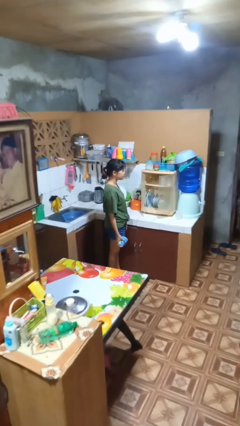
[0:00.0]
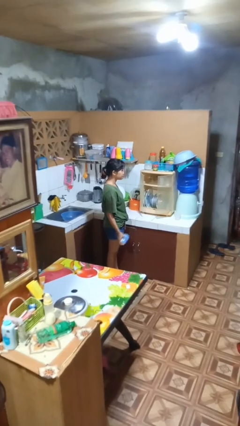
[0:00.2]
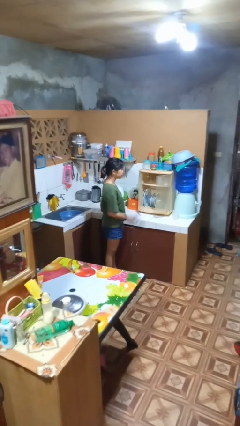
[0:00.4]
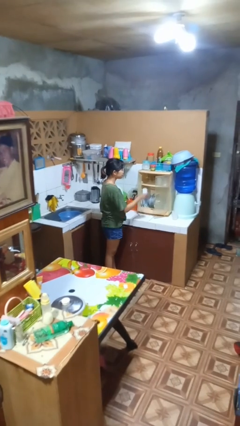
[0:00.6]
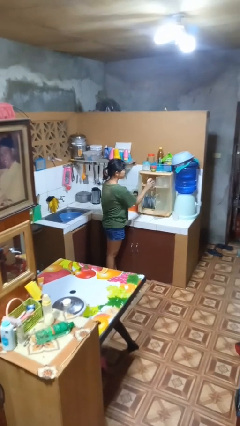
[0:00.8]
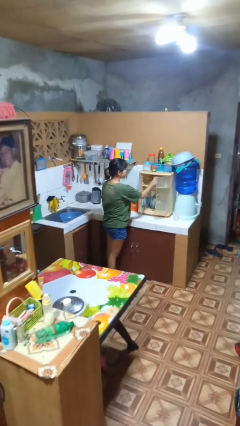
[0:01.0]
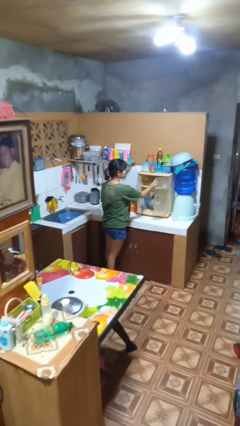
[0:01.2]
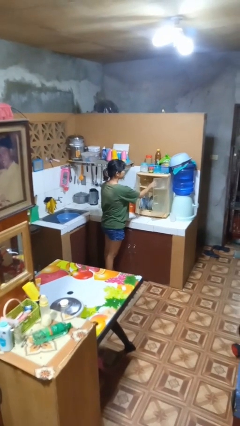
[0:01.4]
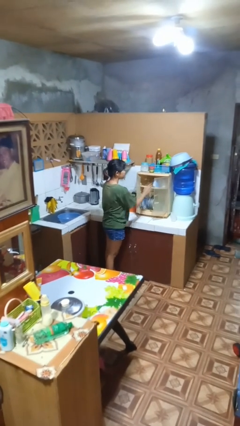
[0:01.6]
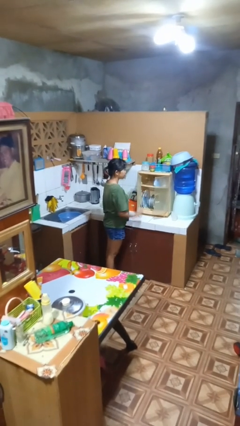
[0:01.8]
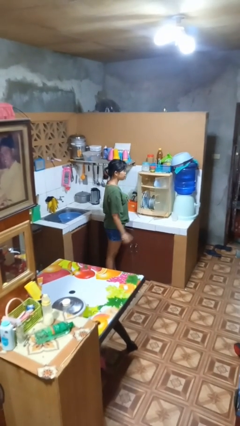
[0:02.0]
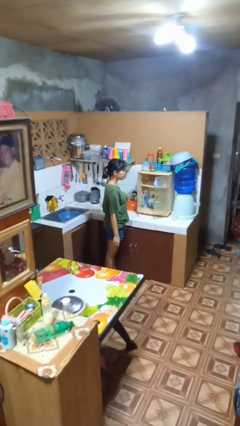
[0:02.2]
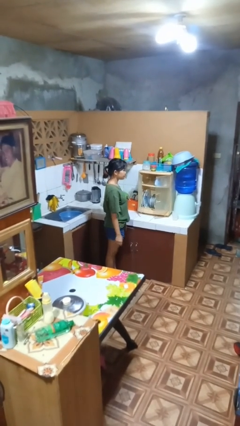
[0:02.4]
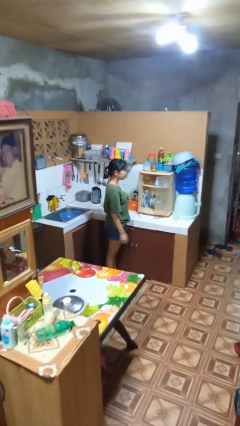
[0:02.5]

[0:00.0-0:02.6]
person puts object in cabinet

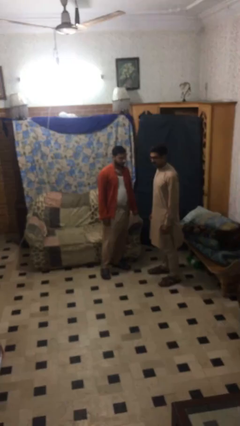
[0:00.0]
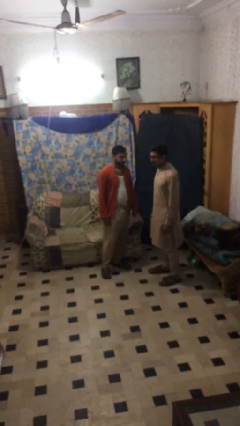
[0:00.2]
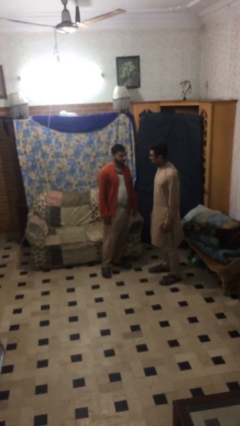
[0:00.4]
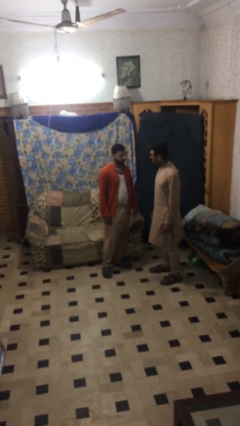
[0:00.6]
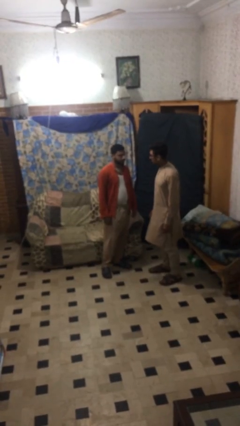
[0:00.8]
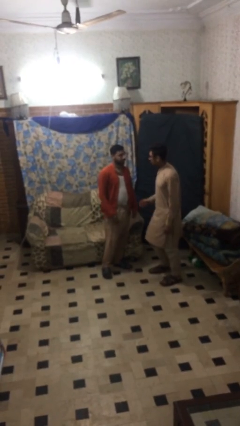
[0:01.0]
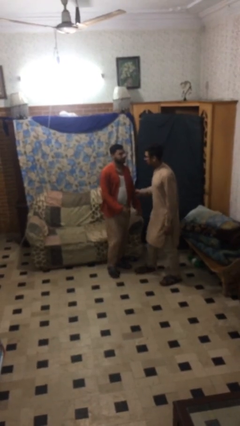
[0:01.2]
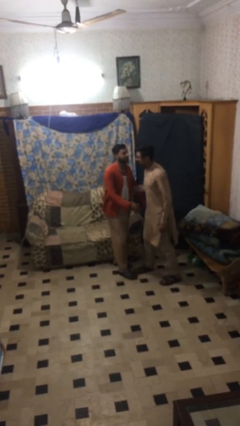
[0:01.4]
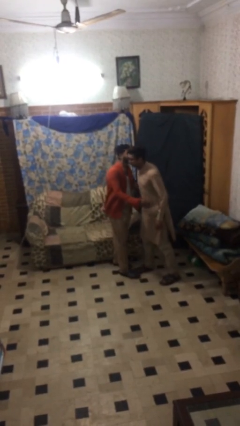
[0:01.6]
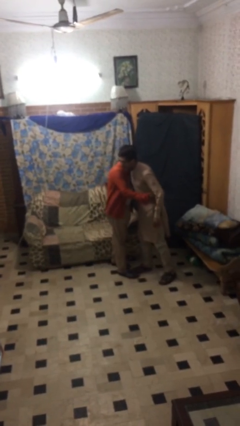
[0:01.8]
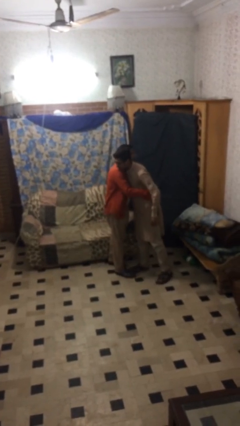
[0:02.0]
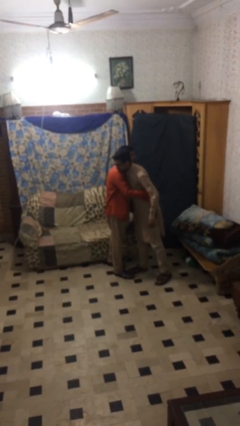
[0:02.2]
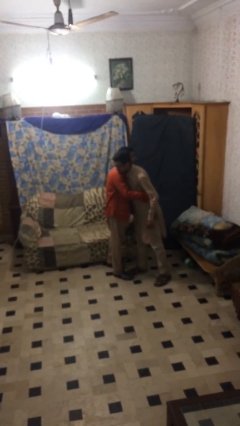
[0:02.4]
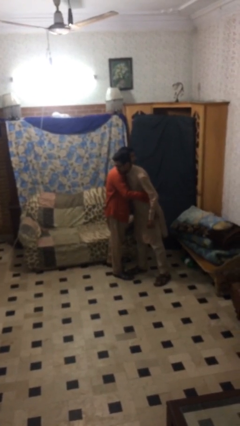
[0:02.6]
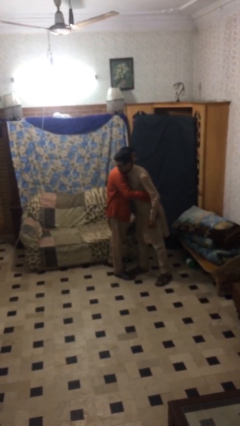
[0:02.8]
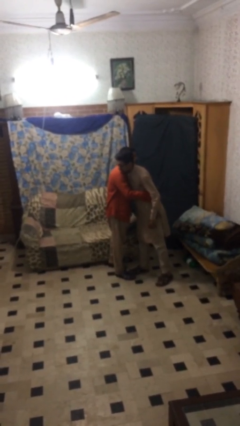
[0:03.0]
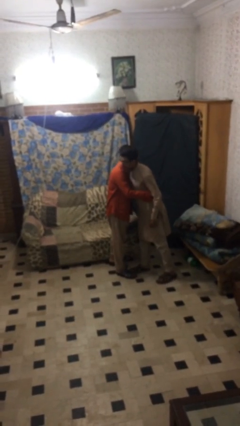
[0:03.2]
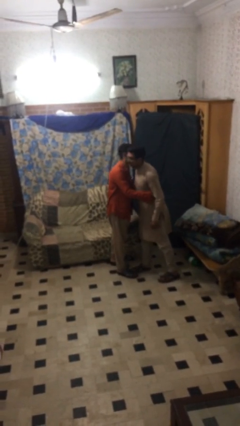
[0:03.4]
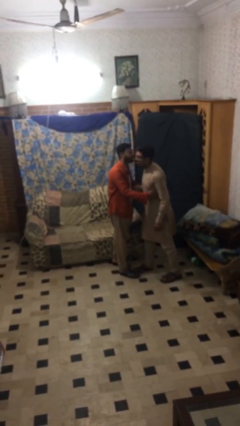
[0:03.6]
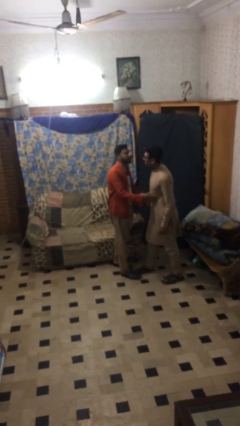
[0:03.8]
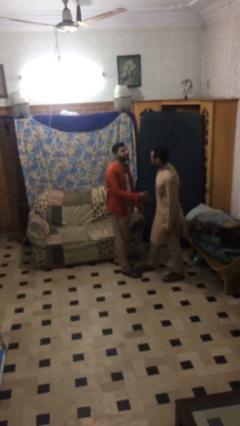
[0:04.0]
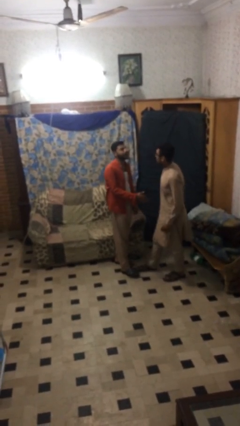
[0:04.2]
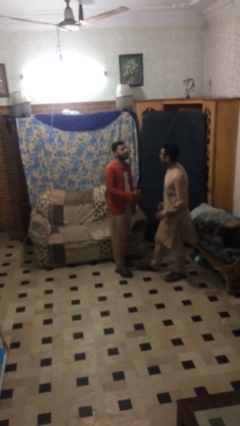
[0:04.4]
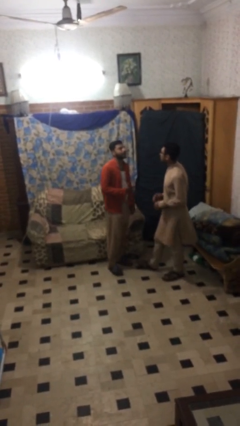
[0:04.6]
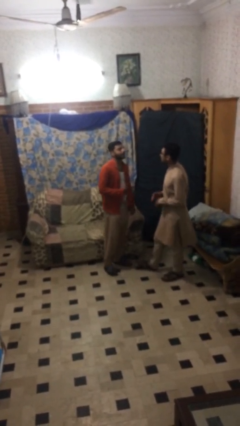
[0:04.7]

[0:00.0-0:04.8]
person embraces person

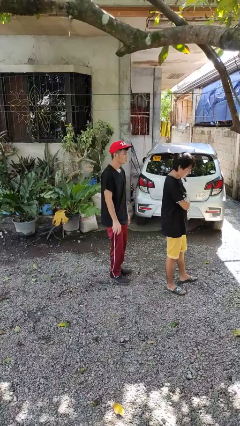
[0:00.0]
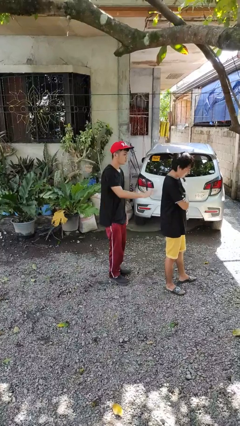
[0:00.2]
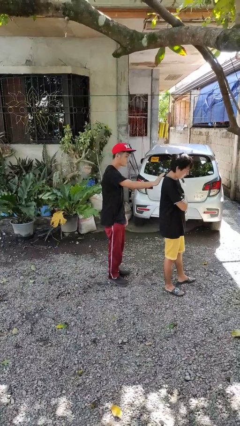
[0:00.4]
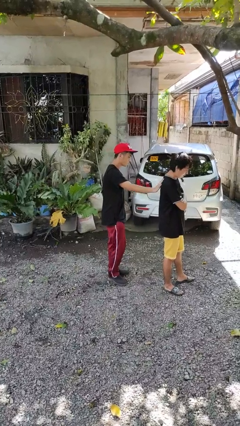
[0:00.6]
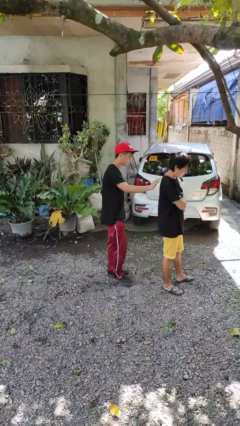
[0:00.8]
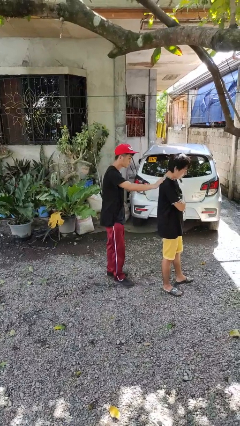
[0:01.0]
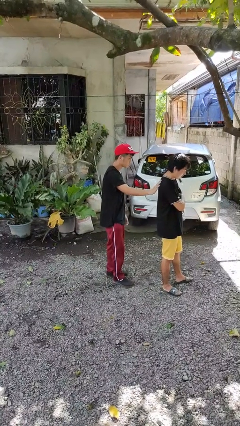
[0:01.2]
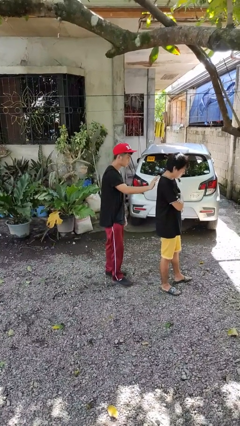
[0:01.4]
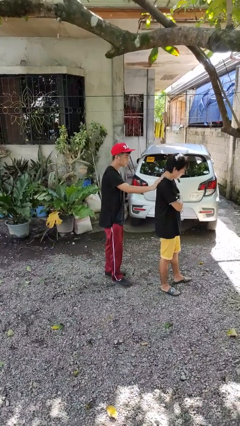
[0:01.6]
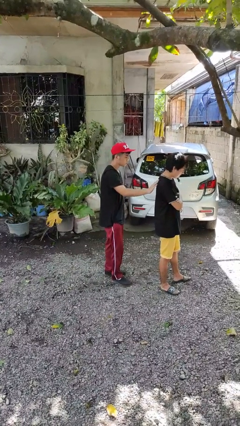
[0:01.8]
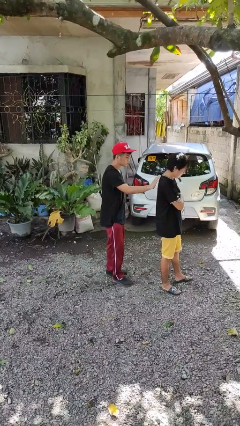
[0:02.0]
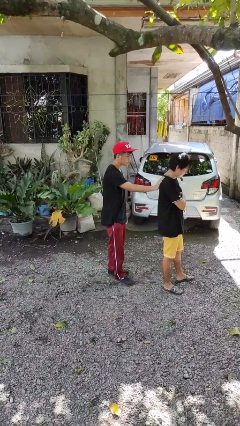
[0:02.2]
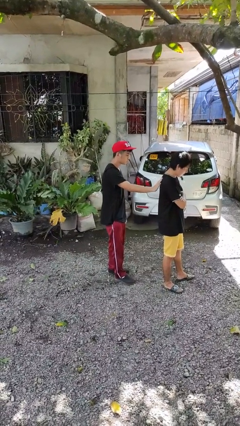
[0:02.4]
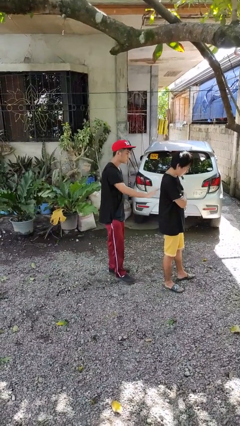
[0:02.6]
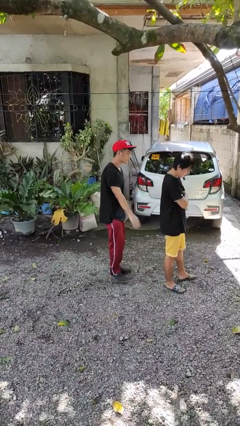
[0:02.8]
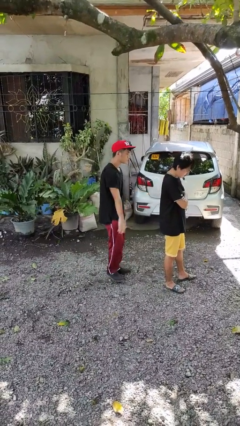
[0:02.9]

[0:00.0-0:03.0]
person touches back of person

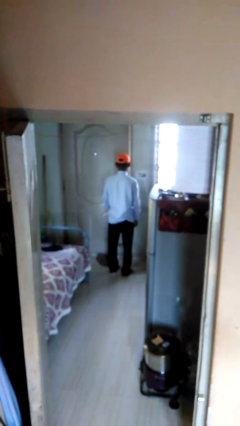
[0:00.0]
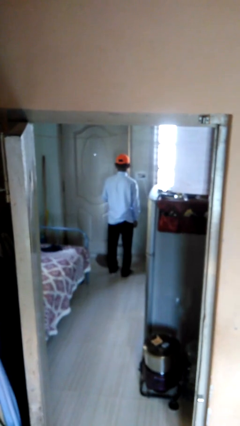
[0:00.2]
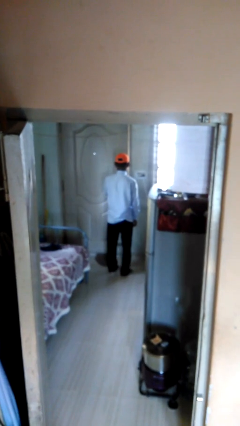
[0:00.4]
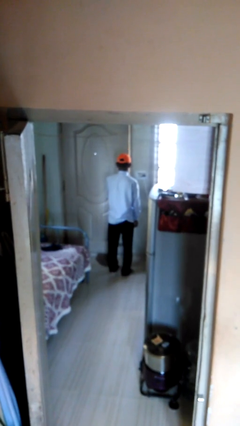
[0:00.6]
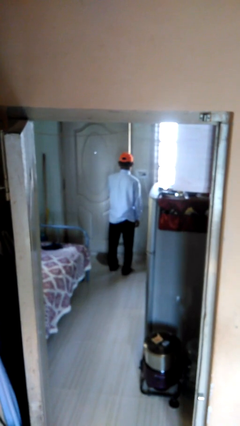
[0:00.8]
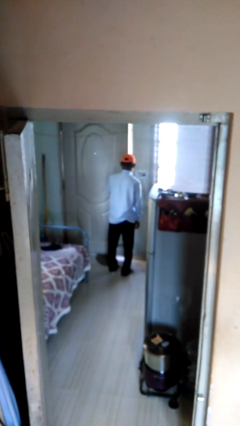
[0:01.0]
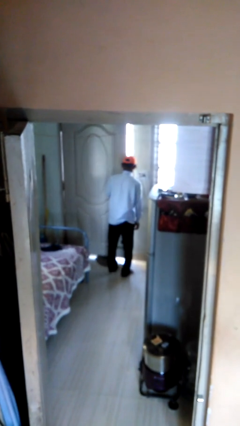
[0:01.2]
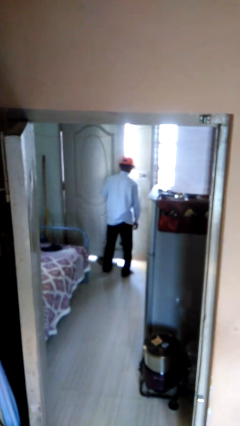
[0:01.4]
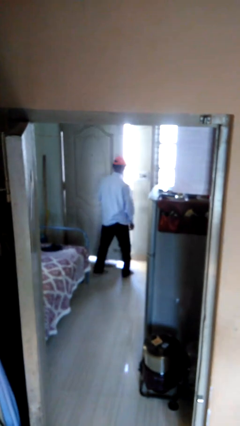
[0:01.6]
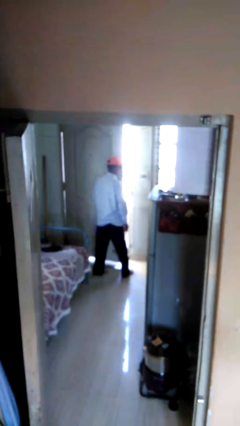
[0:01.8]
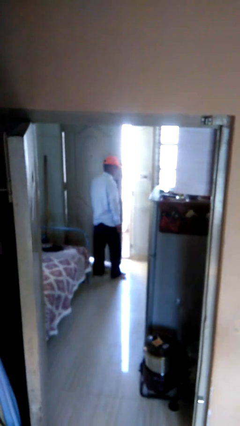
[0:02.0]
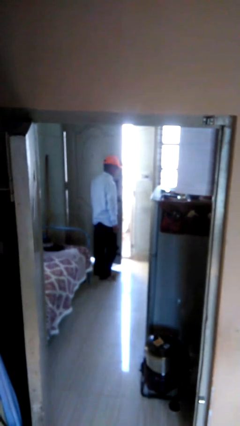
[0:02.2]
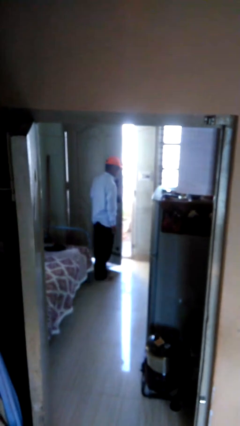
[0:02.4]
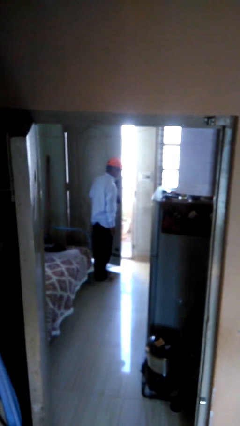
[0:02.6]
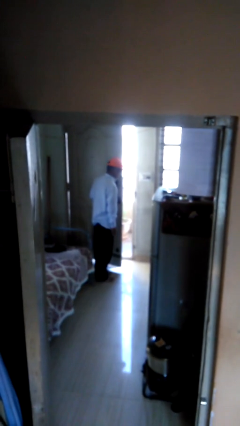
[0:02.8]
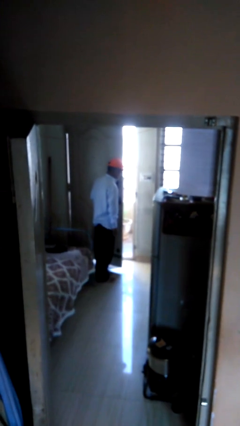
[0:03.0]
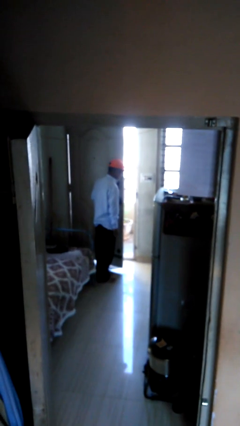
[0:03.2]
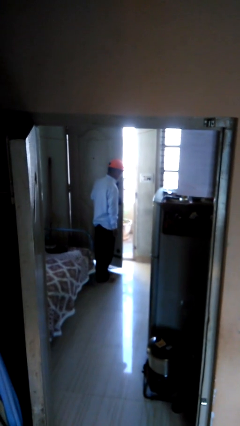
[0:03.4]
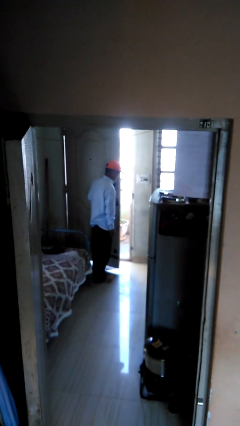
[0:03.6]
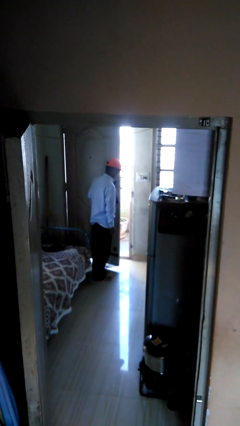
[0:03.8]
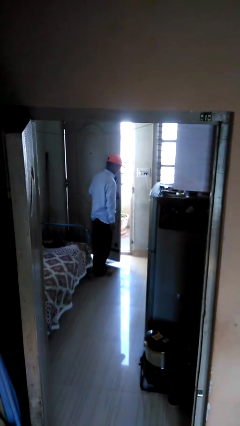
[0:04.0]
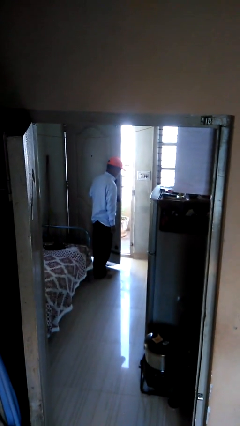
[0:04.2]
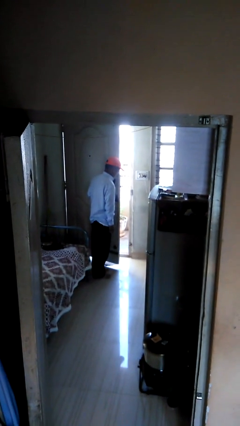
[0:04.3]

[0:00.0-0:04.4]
person opens facility door

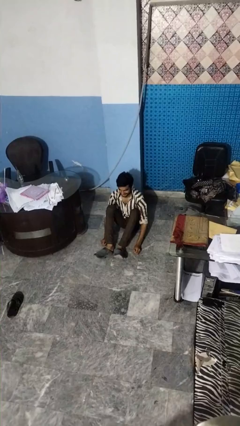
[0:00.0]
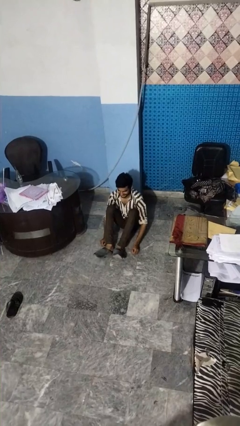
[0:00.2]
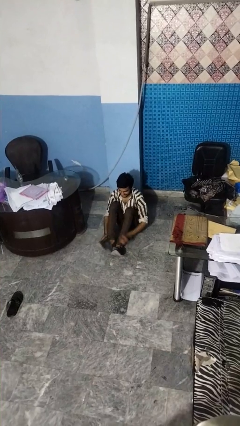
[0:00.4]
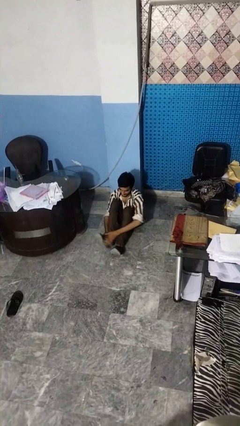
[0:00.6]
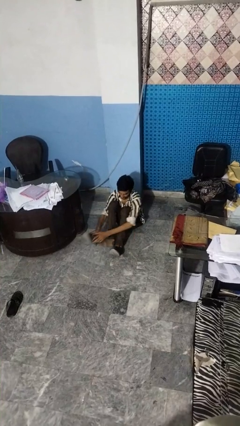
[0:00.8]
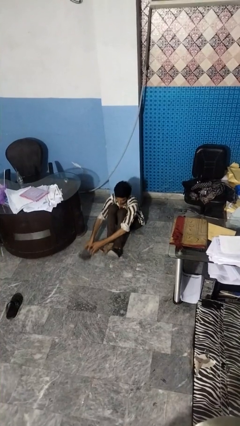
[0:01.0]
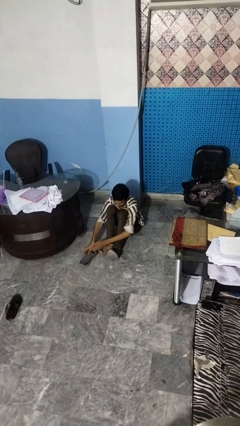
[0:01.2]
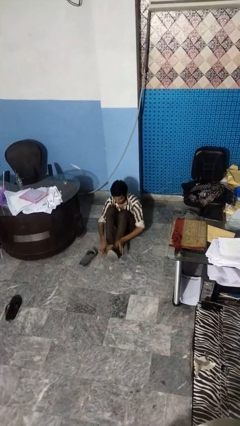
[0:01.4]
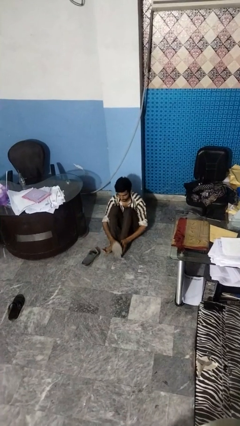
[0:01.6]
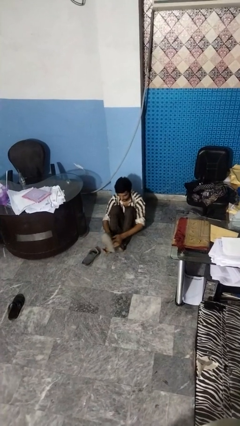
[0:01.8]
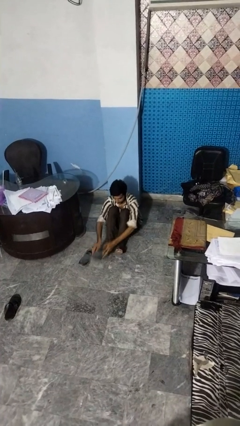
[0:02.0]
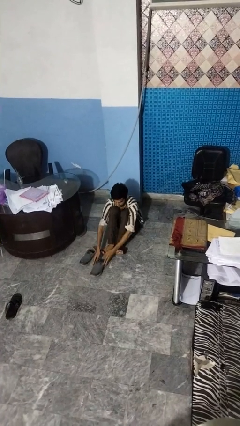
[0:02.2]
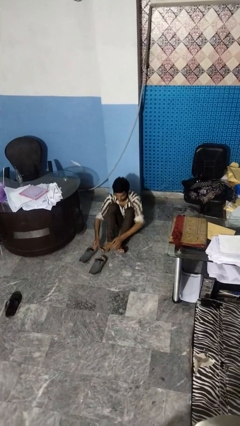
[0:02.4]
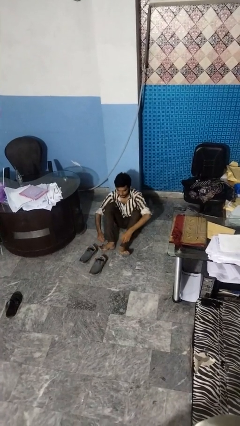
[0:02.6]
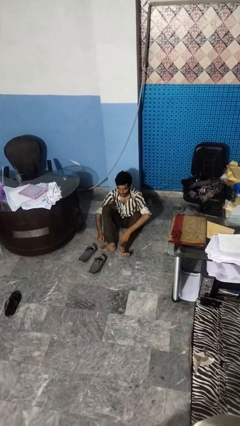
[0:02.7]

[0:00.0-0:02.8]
person takes off shoes
